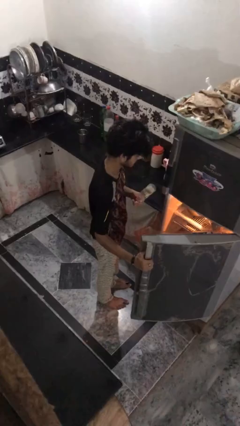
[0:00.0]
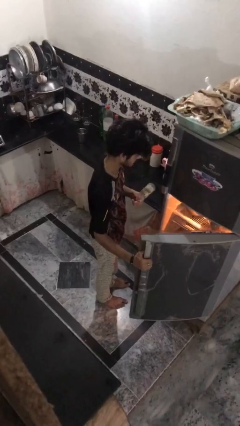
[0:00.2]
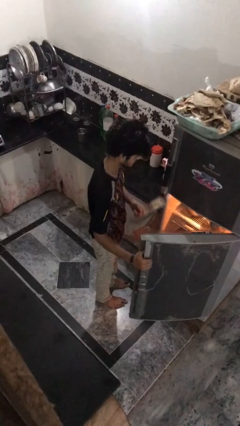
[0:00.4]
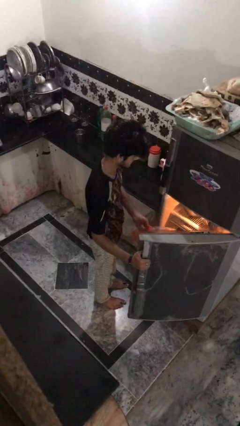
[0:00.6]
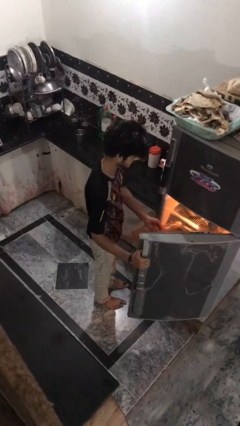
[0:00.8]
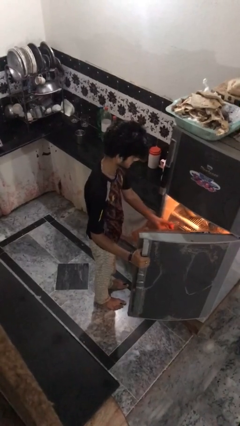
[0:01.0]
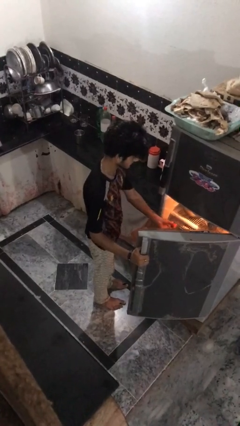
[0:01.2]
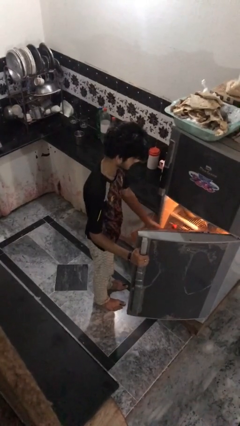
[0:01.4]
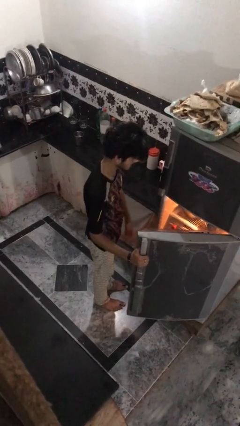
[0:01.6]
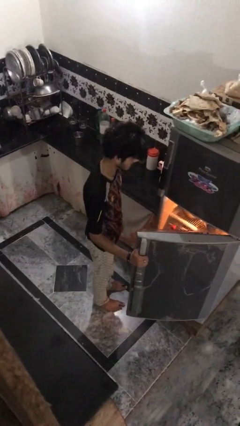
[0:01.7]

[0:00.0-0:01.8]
person puts object into refrigerator

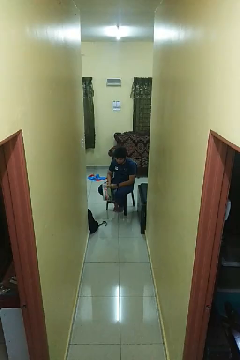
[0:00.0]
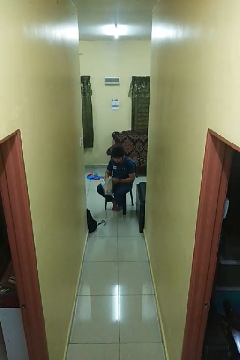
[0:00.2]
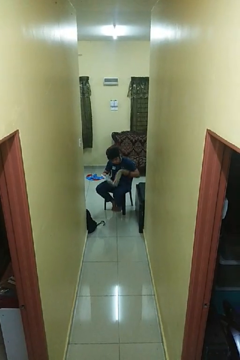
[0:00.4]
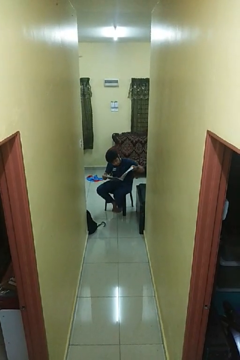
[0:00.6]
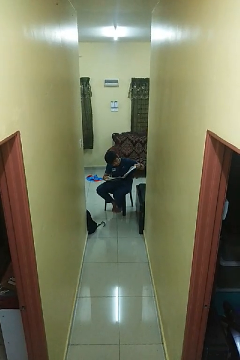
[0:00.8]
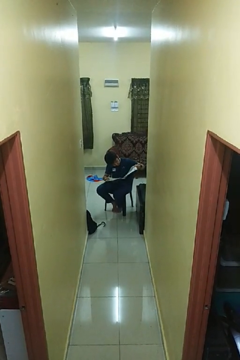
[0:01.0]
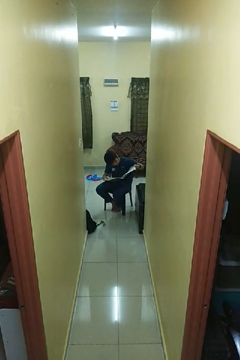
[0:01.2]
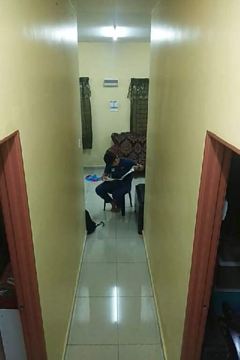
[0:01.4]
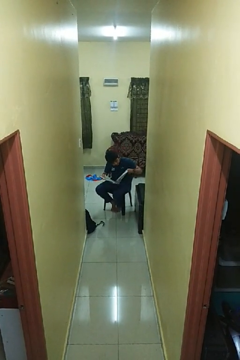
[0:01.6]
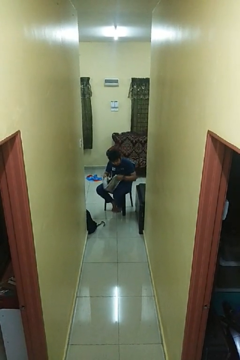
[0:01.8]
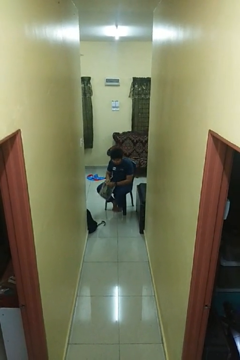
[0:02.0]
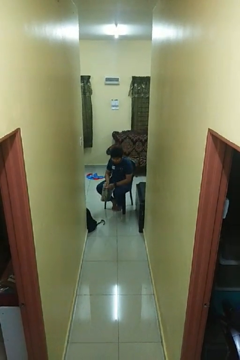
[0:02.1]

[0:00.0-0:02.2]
person reads newspaper

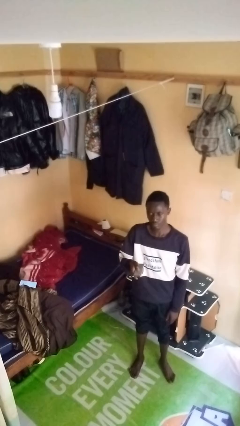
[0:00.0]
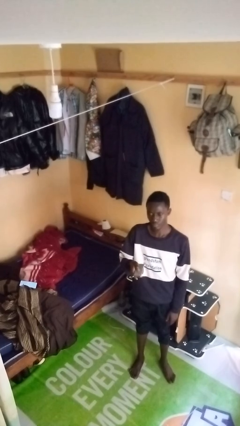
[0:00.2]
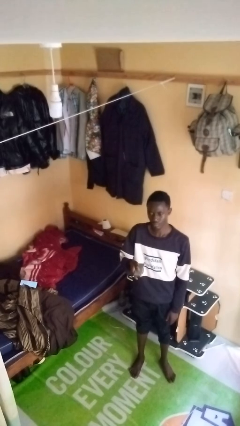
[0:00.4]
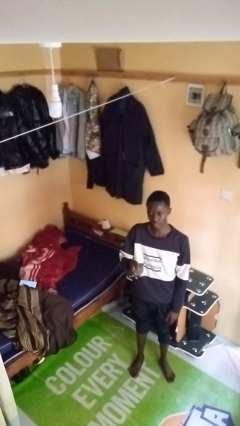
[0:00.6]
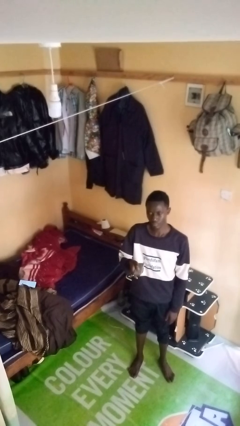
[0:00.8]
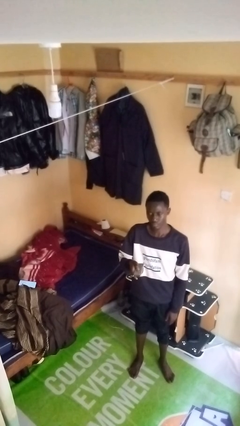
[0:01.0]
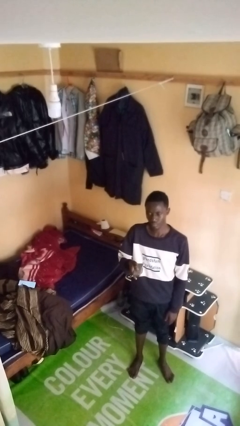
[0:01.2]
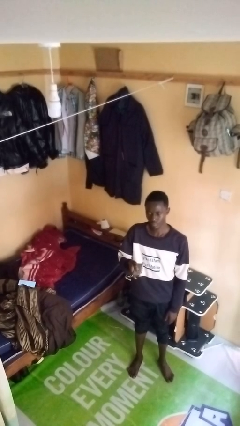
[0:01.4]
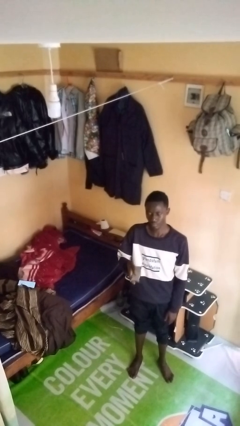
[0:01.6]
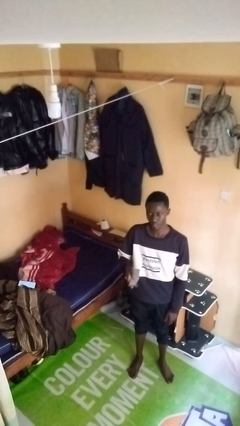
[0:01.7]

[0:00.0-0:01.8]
person uses television remote

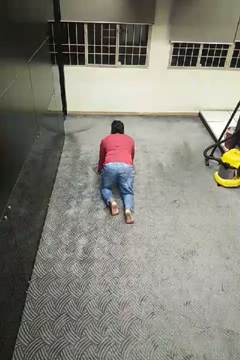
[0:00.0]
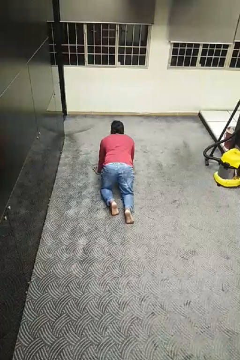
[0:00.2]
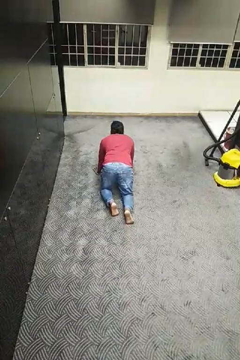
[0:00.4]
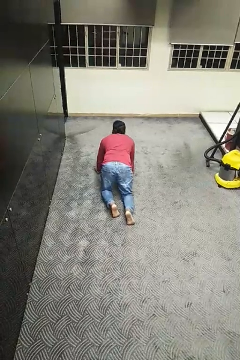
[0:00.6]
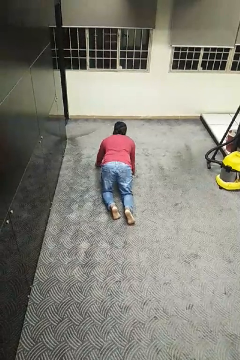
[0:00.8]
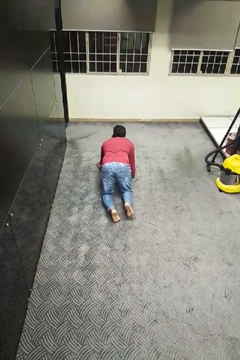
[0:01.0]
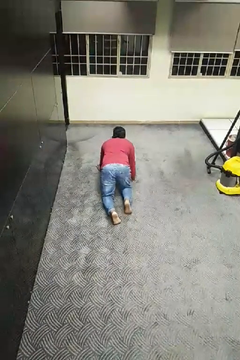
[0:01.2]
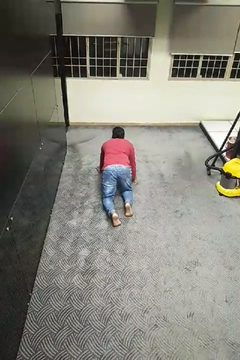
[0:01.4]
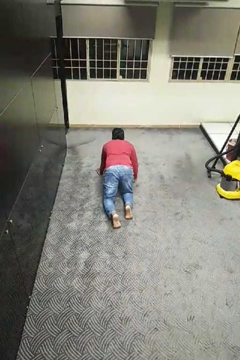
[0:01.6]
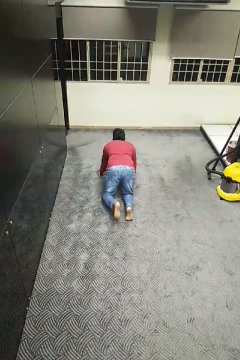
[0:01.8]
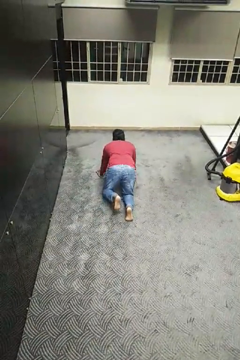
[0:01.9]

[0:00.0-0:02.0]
person crawls

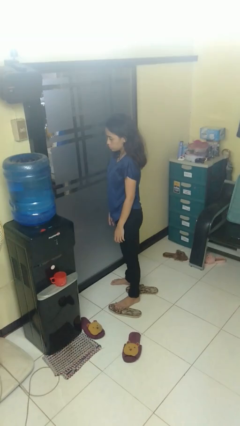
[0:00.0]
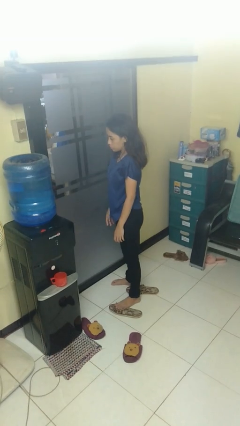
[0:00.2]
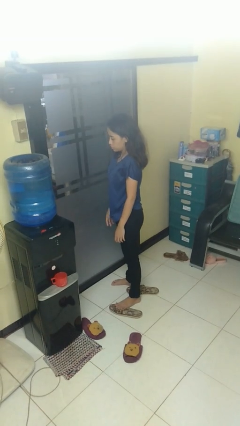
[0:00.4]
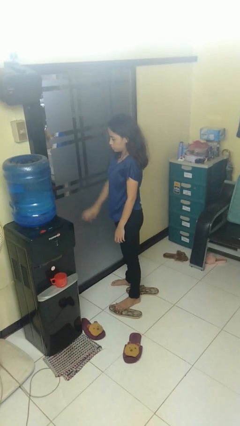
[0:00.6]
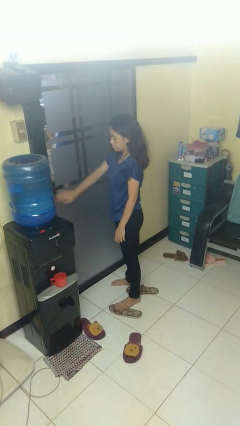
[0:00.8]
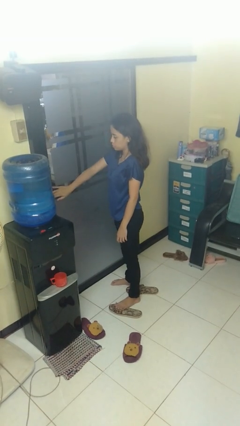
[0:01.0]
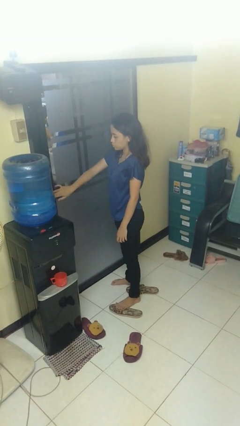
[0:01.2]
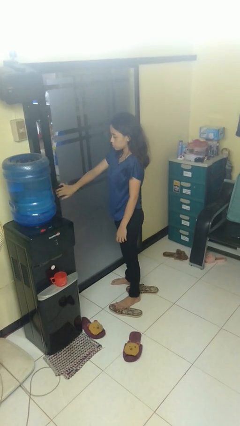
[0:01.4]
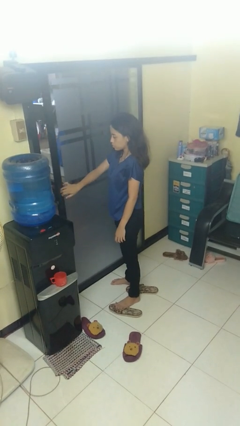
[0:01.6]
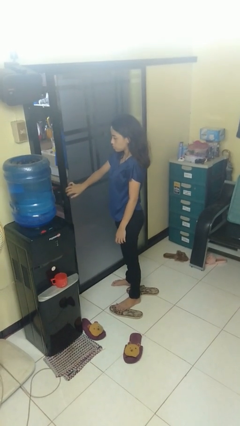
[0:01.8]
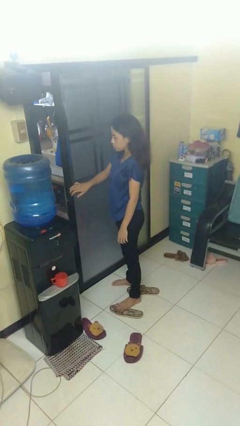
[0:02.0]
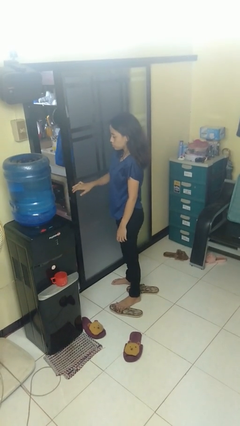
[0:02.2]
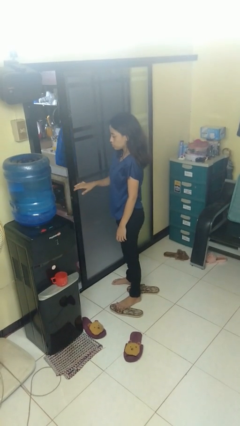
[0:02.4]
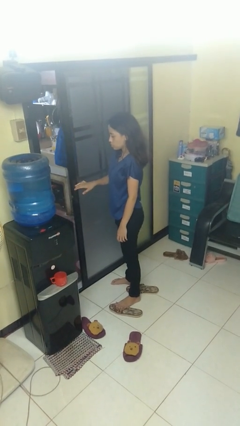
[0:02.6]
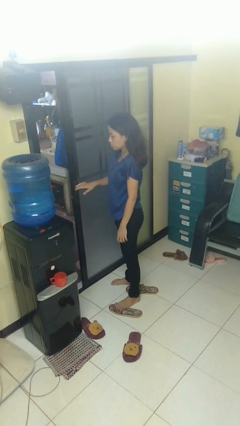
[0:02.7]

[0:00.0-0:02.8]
person opens sliding door

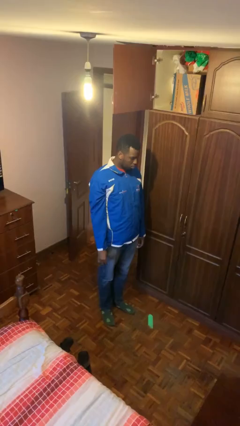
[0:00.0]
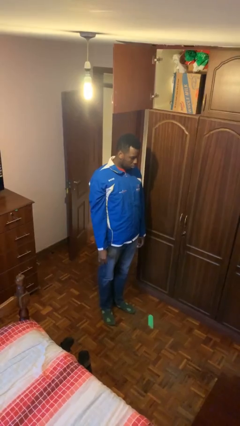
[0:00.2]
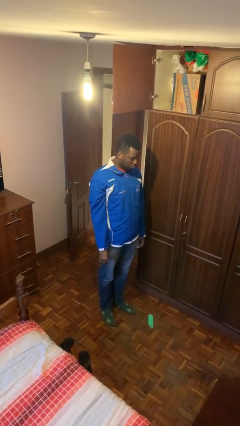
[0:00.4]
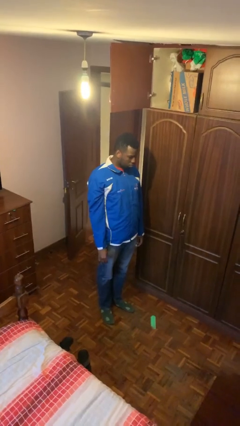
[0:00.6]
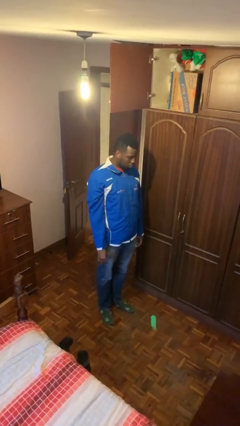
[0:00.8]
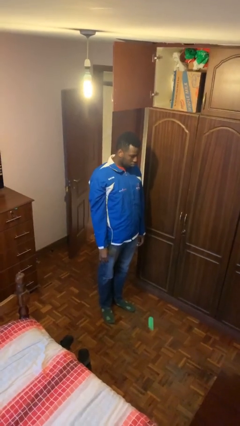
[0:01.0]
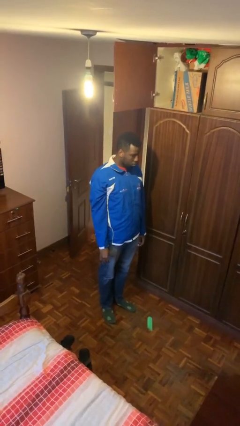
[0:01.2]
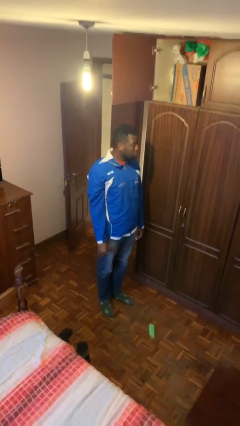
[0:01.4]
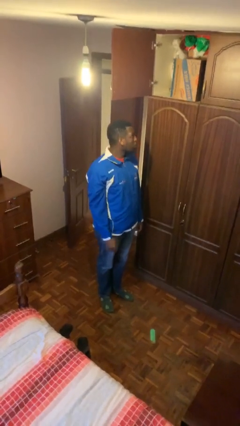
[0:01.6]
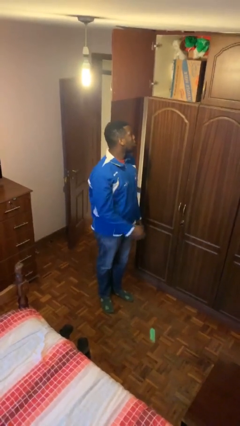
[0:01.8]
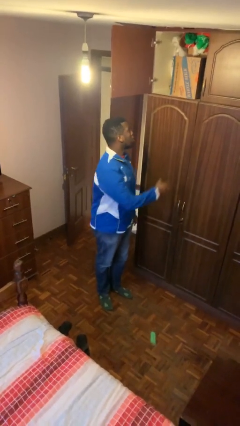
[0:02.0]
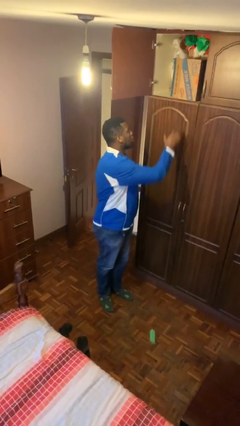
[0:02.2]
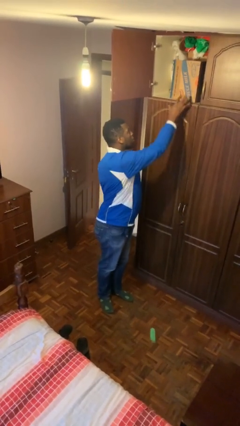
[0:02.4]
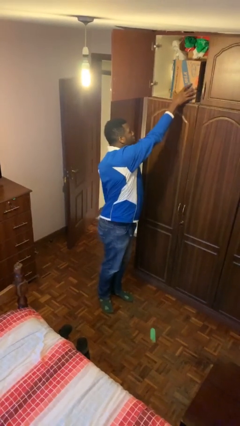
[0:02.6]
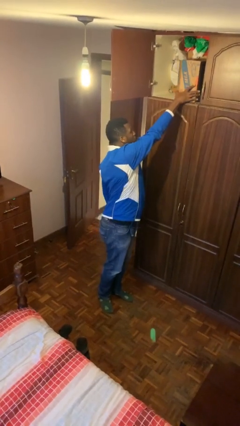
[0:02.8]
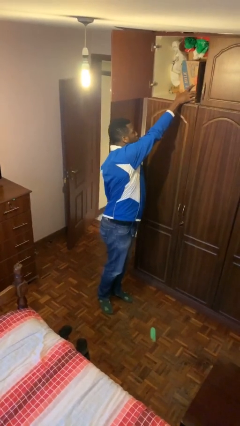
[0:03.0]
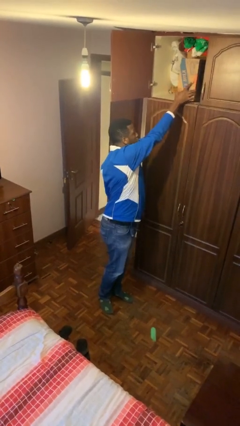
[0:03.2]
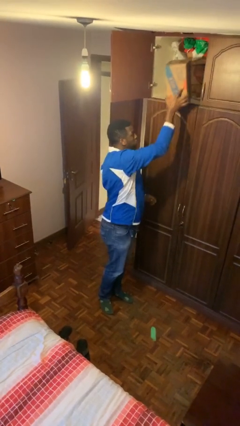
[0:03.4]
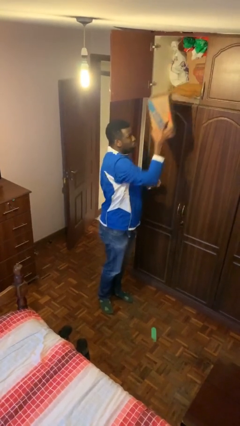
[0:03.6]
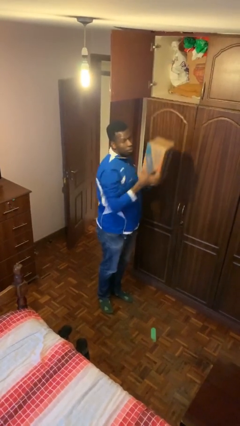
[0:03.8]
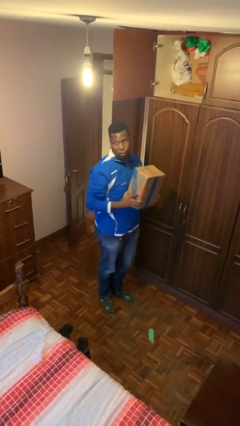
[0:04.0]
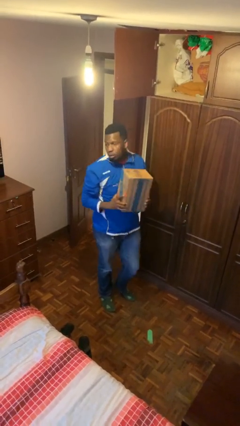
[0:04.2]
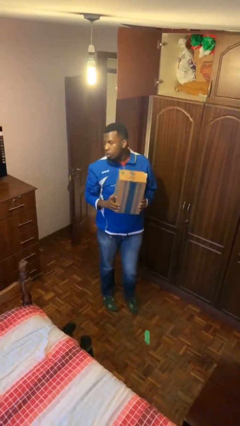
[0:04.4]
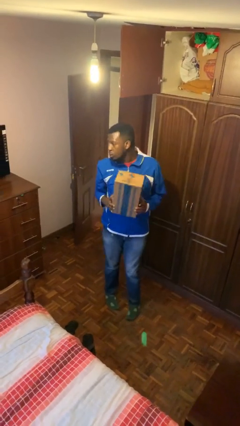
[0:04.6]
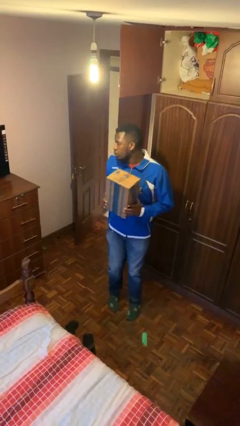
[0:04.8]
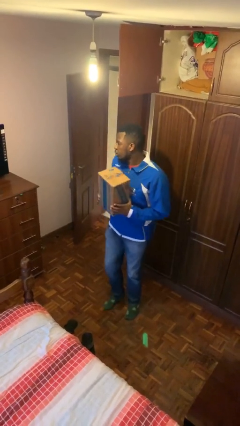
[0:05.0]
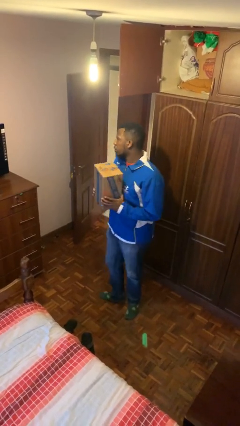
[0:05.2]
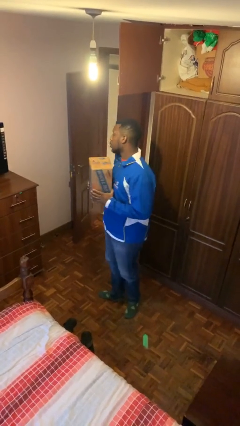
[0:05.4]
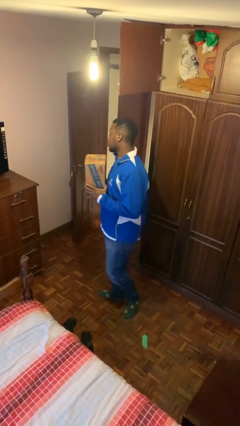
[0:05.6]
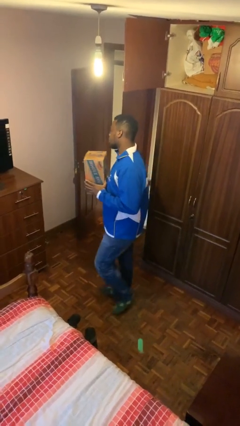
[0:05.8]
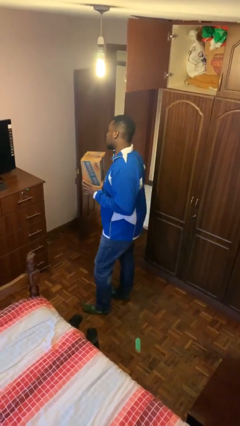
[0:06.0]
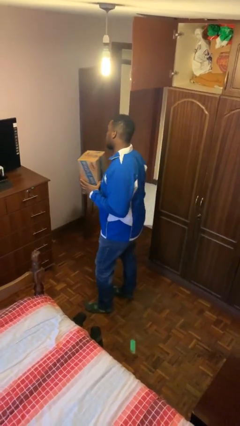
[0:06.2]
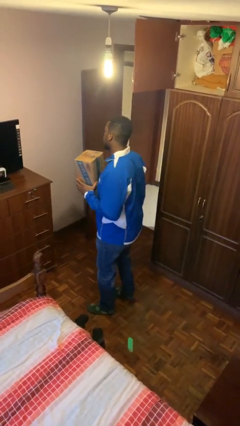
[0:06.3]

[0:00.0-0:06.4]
person picks up object from shelf

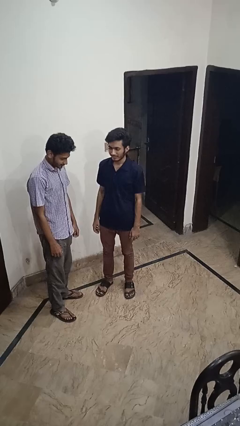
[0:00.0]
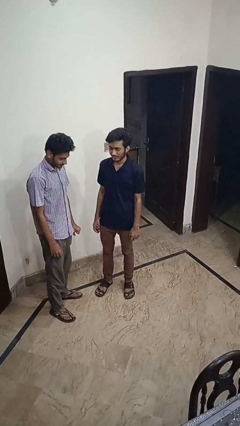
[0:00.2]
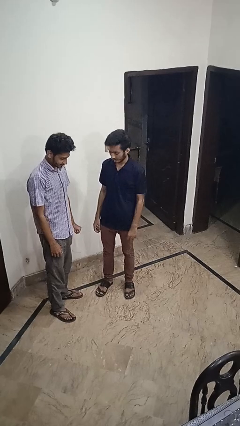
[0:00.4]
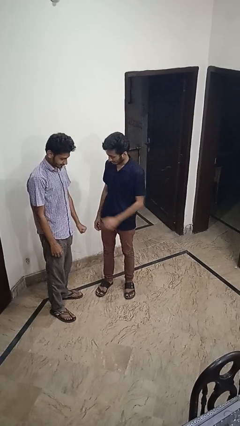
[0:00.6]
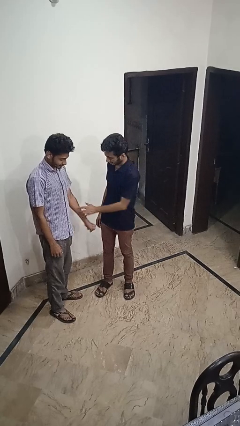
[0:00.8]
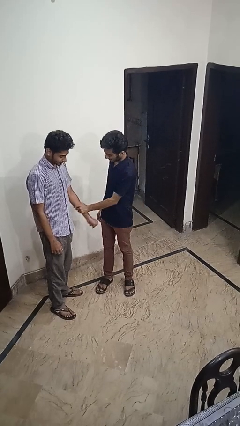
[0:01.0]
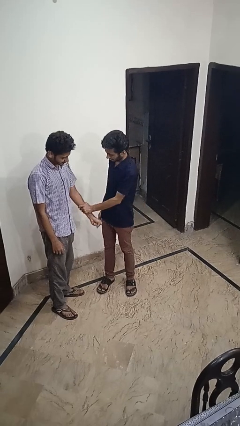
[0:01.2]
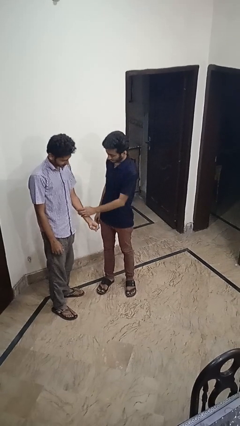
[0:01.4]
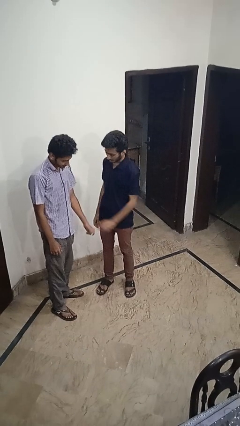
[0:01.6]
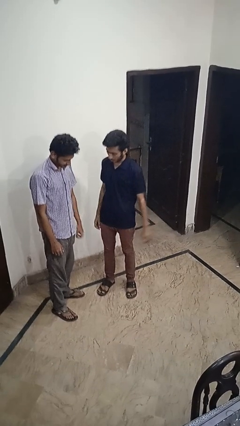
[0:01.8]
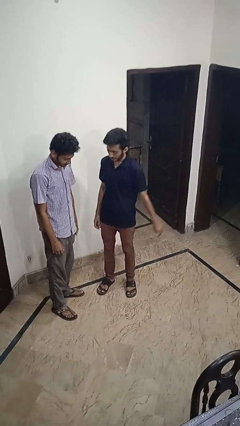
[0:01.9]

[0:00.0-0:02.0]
person grabs person by forearm
